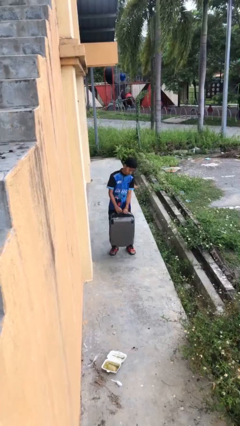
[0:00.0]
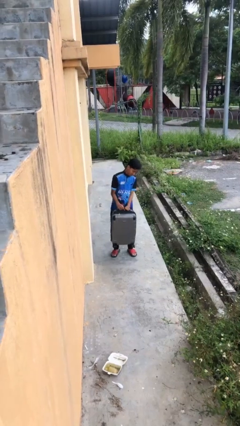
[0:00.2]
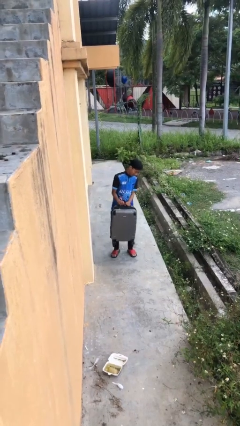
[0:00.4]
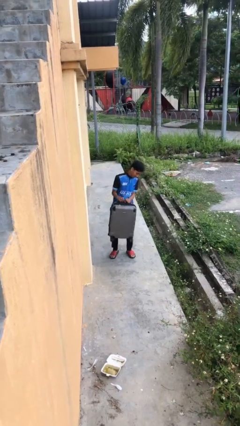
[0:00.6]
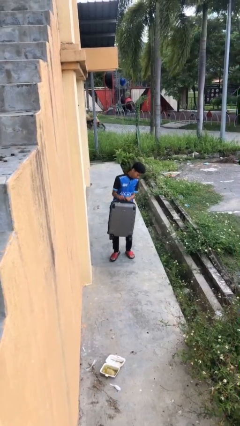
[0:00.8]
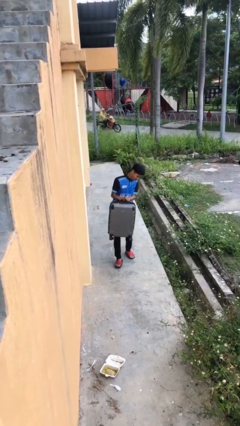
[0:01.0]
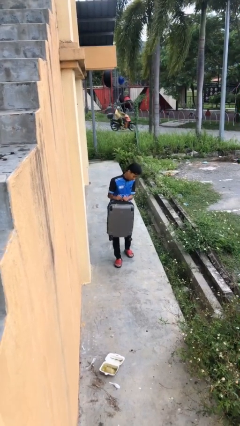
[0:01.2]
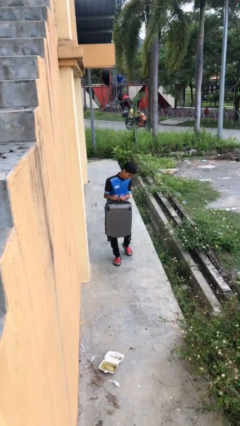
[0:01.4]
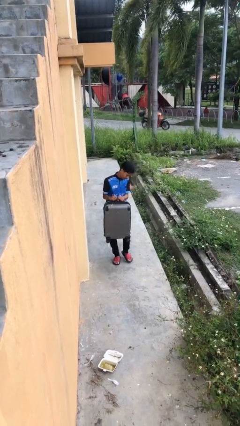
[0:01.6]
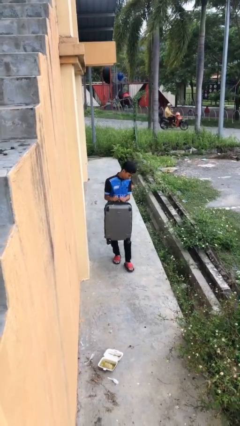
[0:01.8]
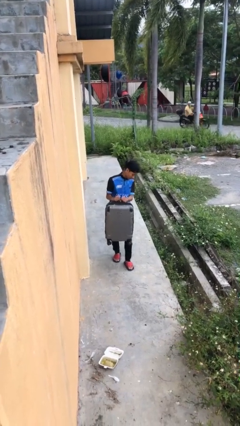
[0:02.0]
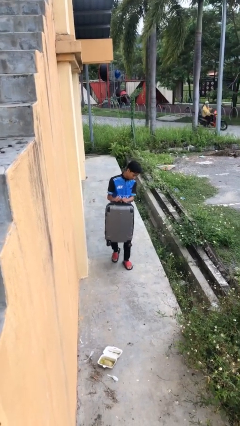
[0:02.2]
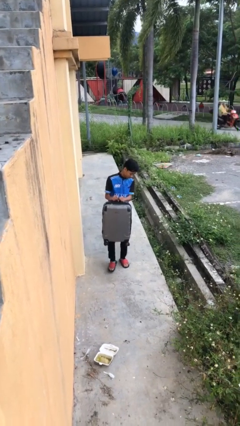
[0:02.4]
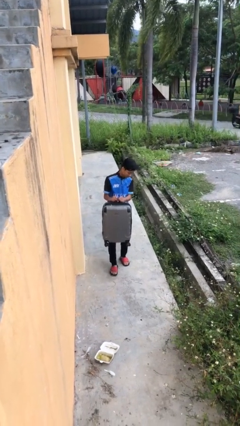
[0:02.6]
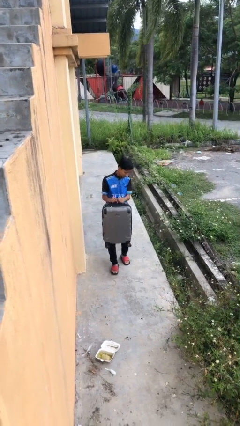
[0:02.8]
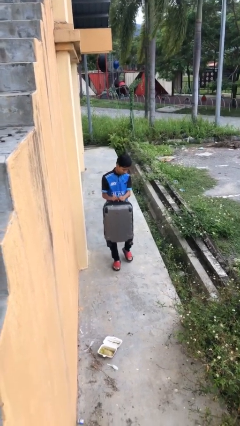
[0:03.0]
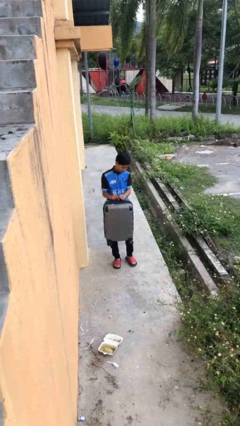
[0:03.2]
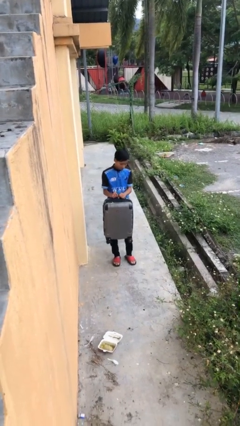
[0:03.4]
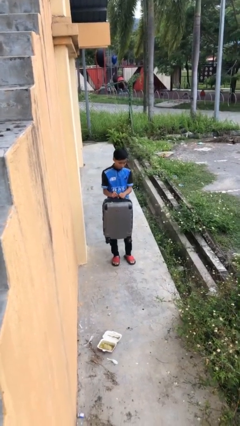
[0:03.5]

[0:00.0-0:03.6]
person carries heavy object

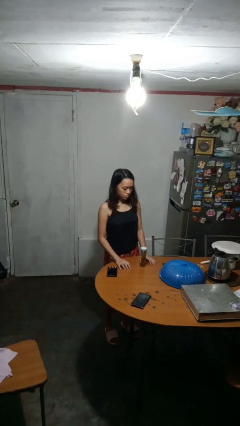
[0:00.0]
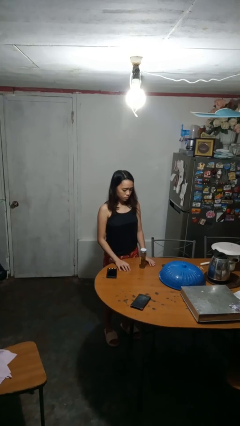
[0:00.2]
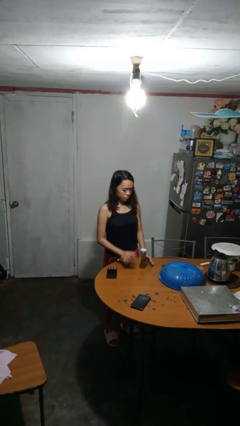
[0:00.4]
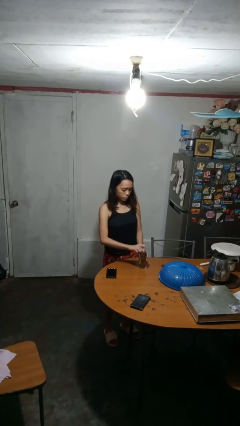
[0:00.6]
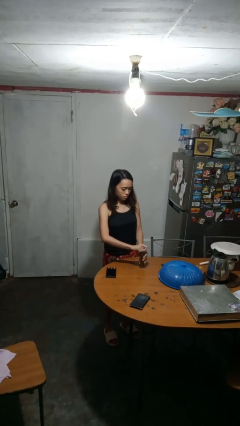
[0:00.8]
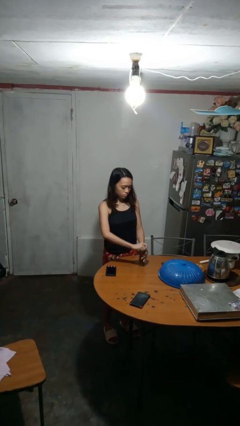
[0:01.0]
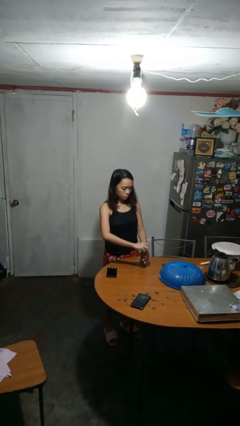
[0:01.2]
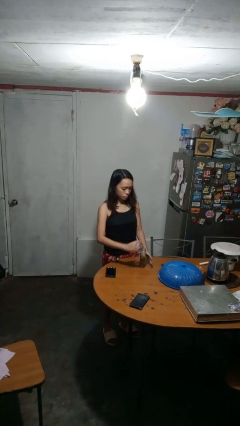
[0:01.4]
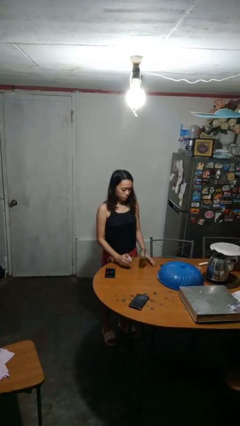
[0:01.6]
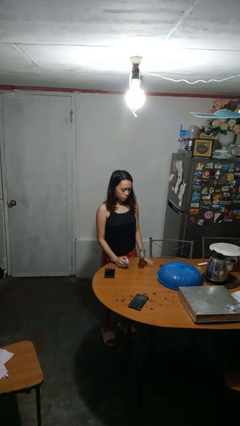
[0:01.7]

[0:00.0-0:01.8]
person opens jar

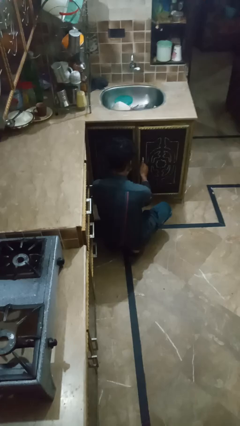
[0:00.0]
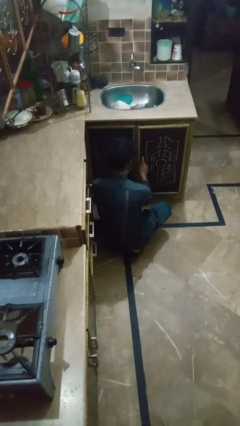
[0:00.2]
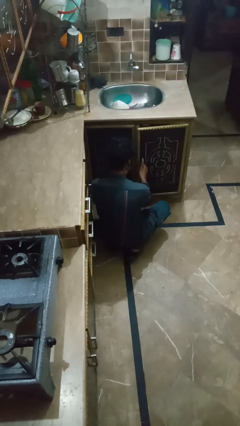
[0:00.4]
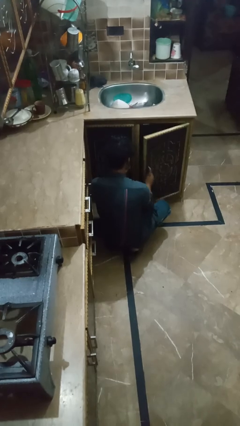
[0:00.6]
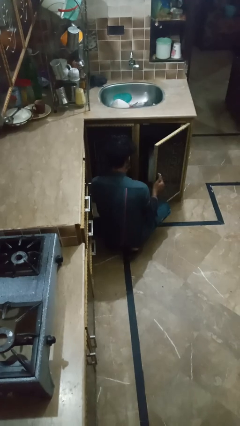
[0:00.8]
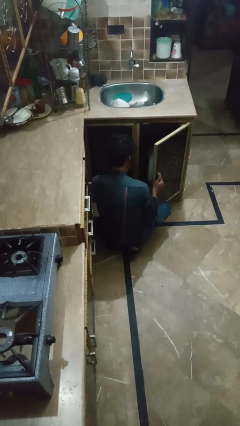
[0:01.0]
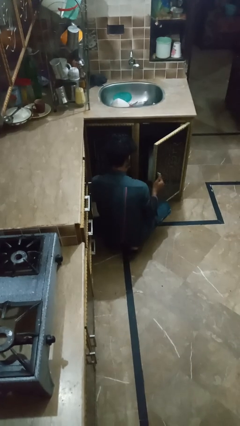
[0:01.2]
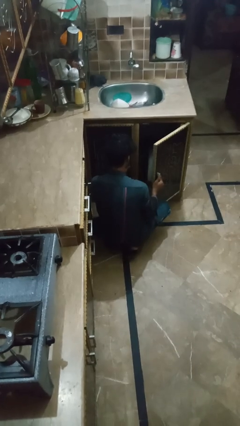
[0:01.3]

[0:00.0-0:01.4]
person opens kitchen drawer

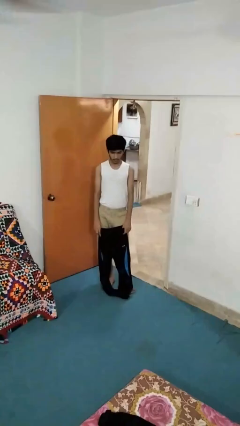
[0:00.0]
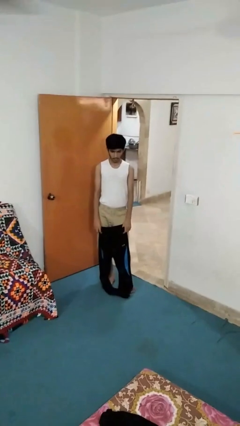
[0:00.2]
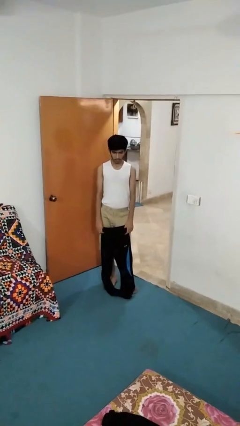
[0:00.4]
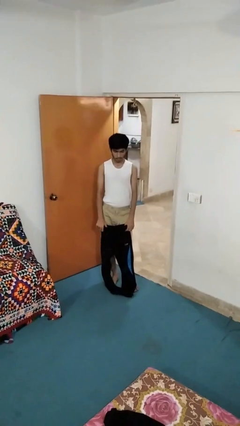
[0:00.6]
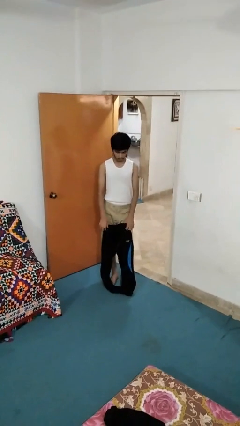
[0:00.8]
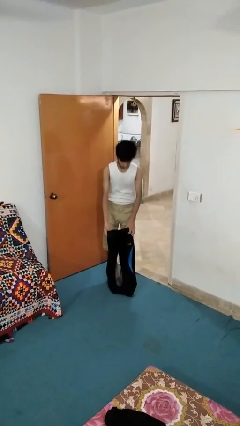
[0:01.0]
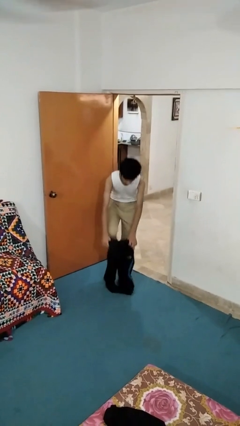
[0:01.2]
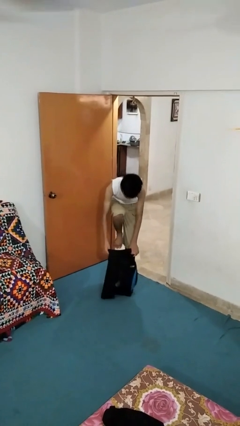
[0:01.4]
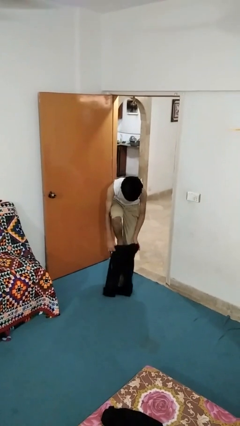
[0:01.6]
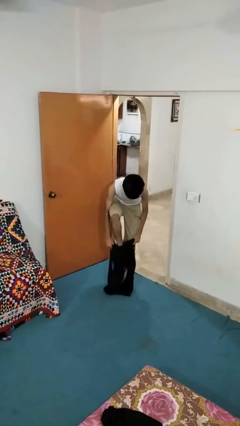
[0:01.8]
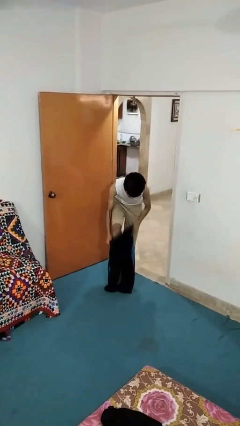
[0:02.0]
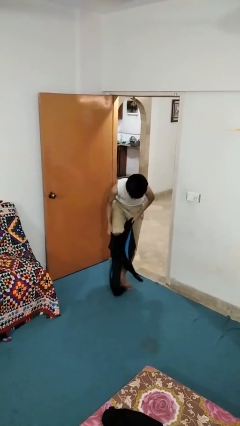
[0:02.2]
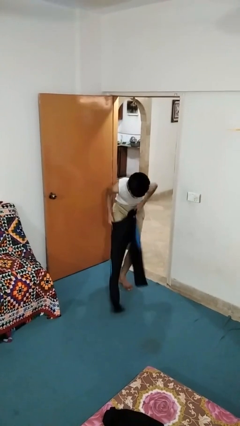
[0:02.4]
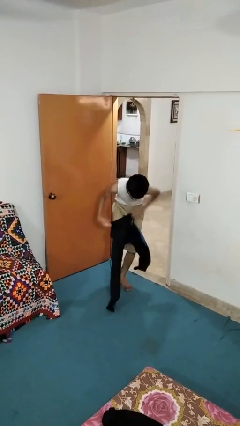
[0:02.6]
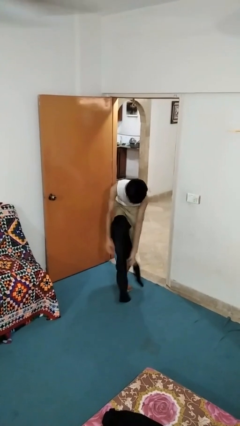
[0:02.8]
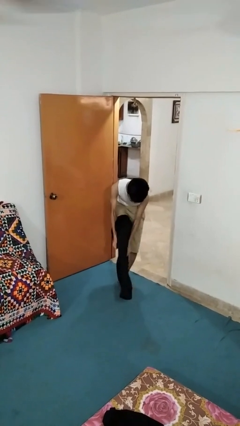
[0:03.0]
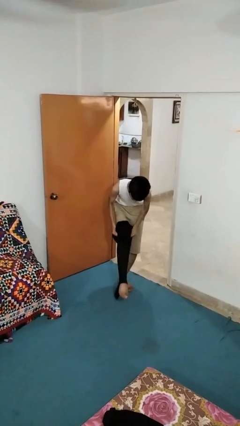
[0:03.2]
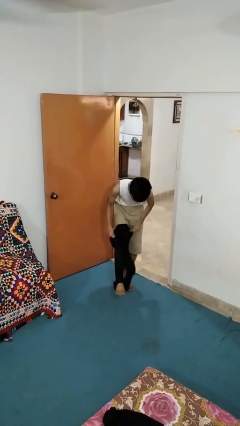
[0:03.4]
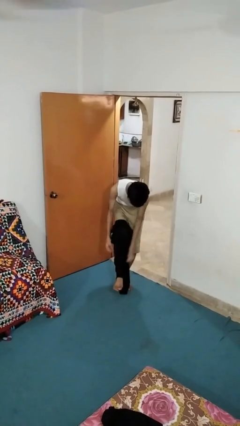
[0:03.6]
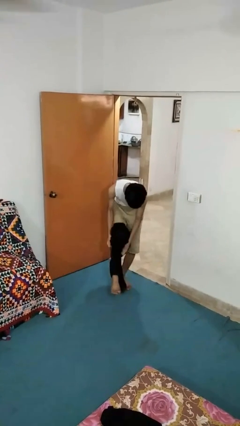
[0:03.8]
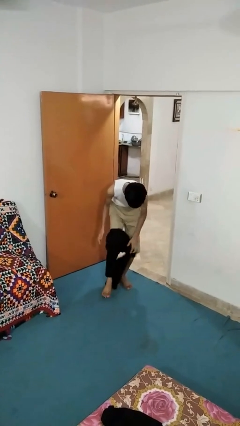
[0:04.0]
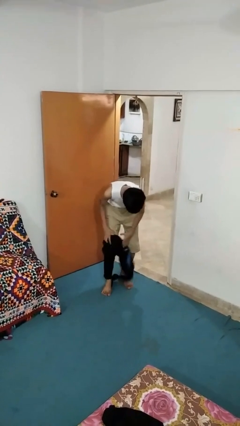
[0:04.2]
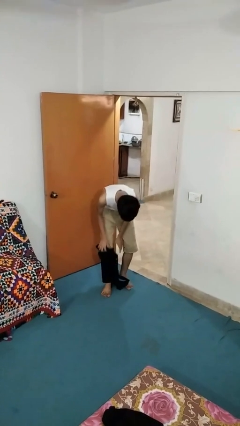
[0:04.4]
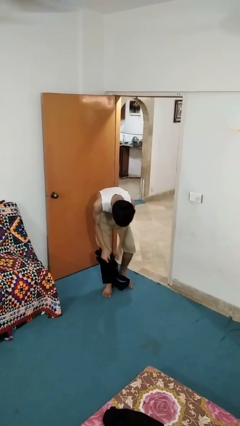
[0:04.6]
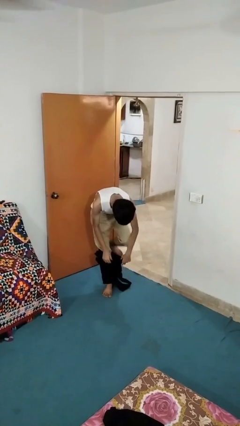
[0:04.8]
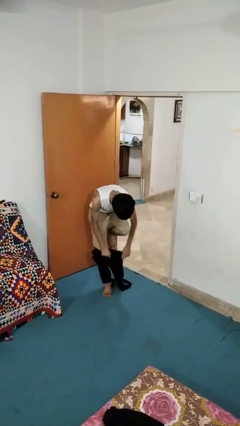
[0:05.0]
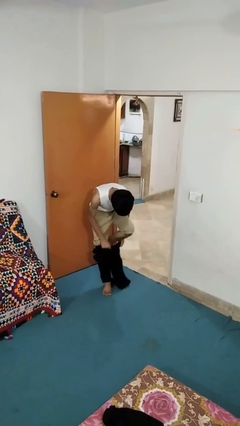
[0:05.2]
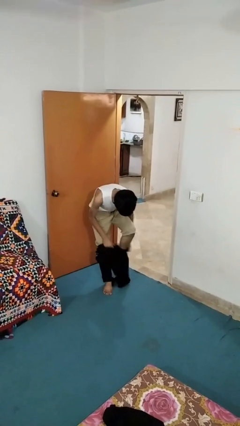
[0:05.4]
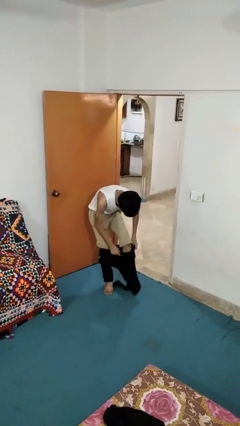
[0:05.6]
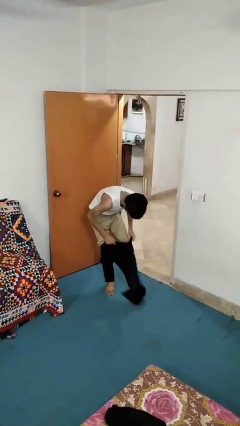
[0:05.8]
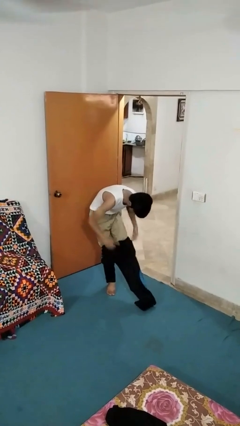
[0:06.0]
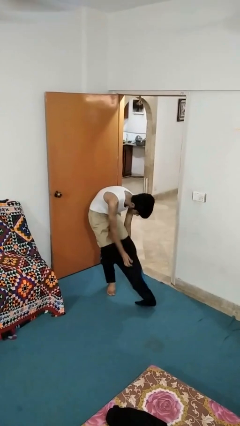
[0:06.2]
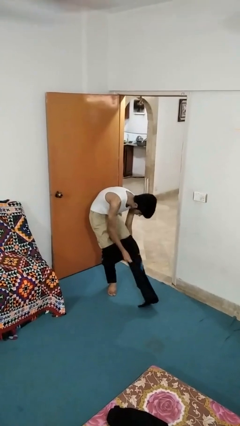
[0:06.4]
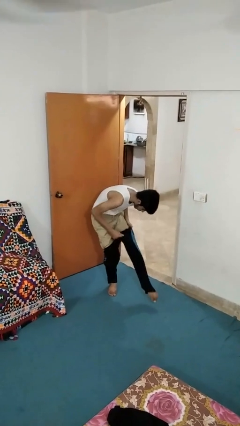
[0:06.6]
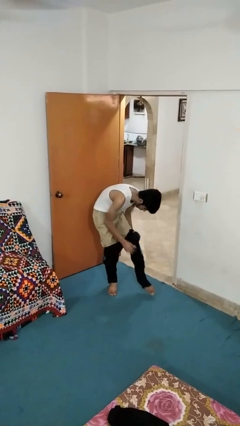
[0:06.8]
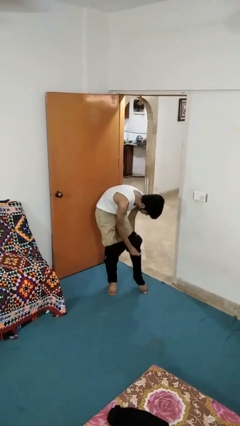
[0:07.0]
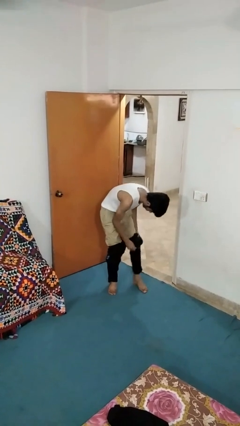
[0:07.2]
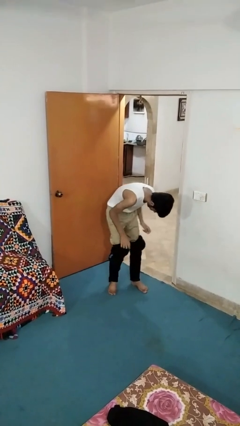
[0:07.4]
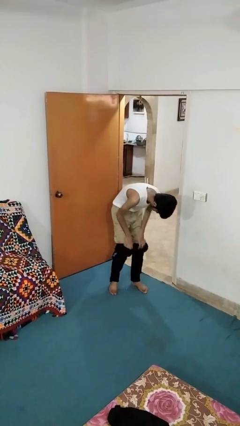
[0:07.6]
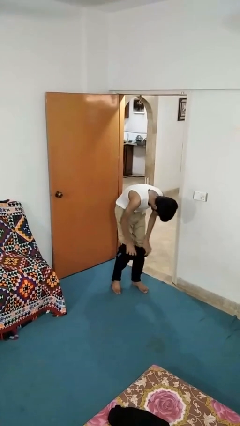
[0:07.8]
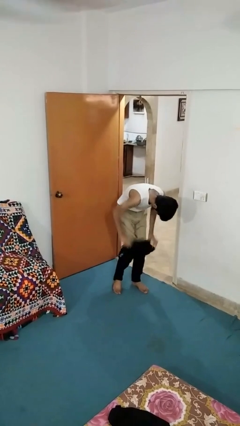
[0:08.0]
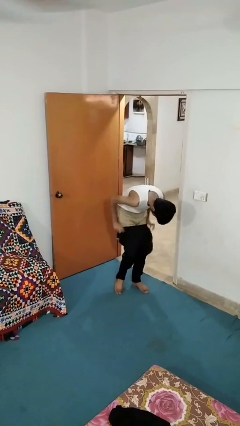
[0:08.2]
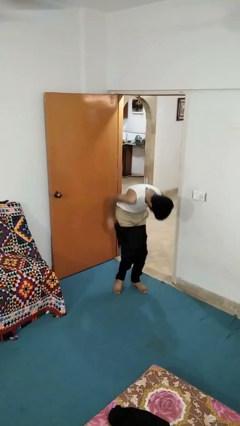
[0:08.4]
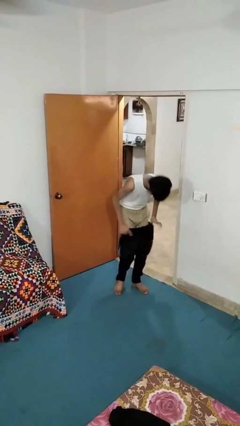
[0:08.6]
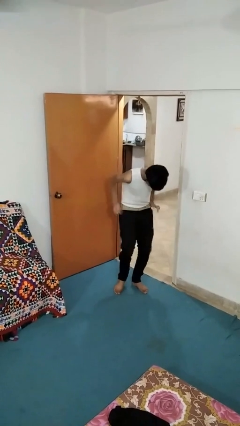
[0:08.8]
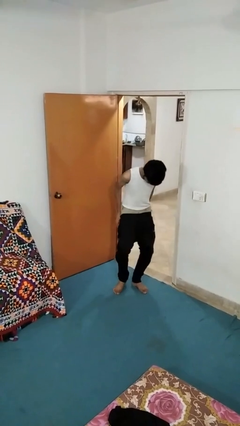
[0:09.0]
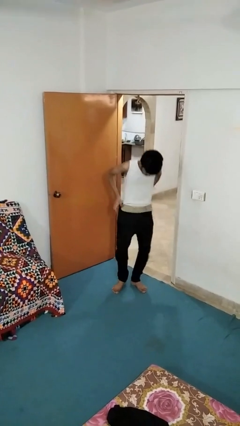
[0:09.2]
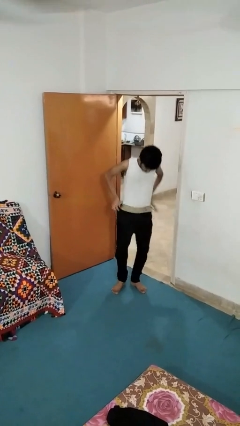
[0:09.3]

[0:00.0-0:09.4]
person puts on pants

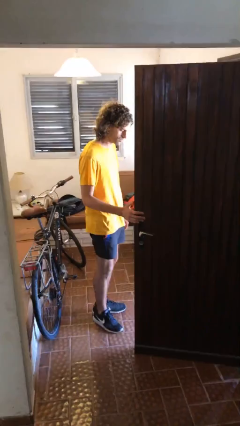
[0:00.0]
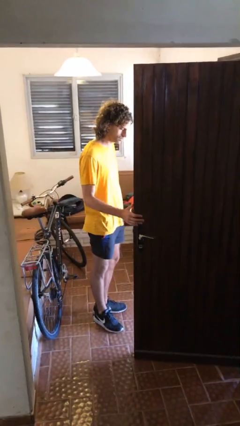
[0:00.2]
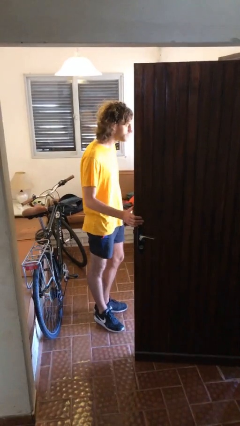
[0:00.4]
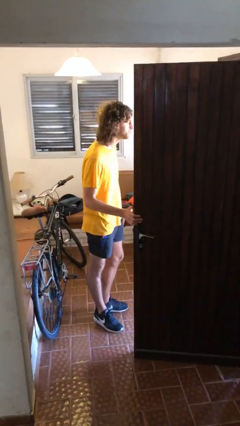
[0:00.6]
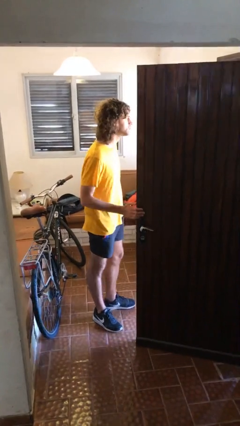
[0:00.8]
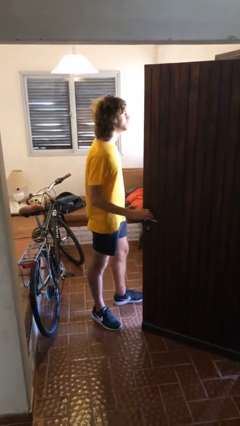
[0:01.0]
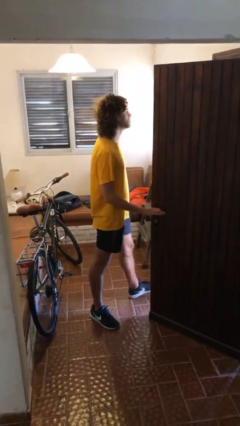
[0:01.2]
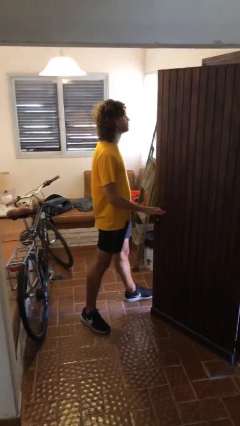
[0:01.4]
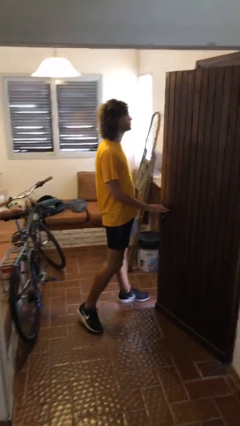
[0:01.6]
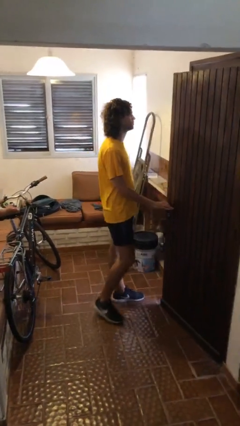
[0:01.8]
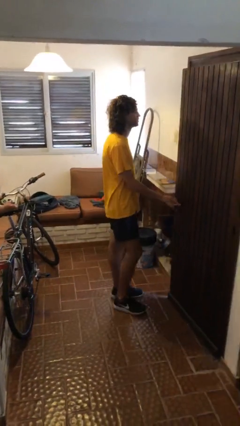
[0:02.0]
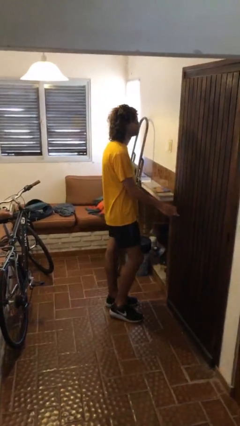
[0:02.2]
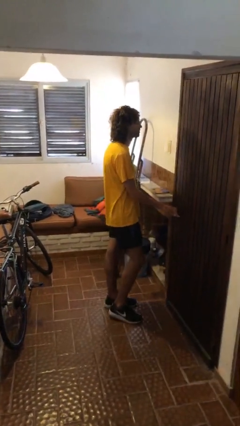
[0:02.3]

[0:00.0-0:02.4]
person closes facility door
